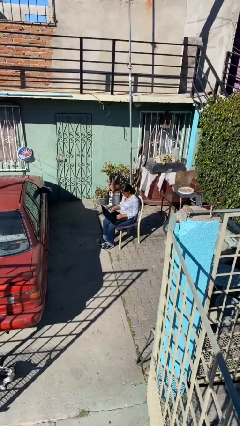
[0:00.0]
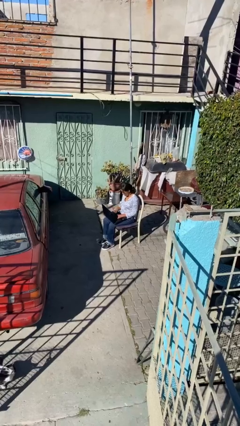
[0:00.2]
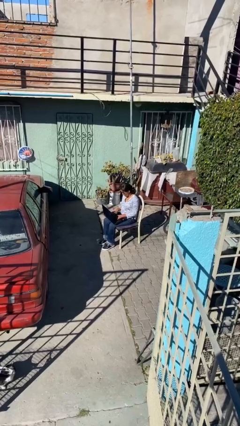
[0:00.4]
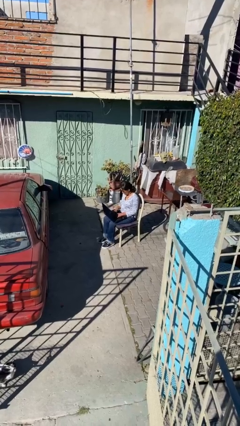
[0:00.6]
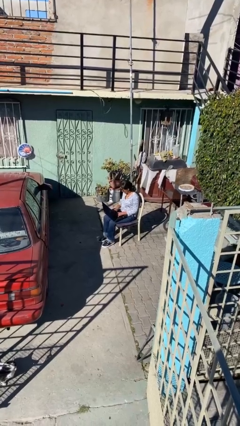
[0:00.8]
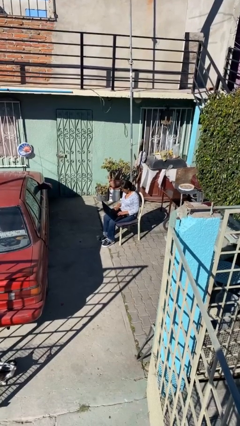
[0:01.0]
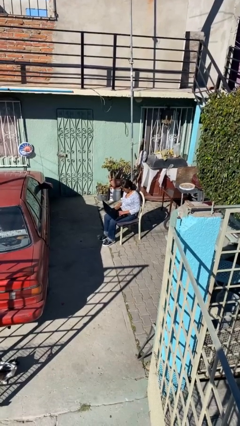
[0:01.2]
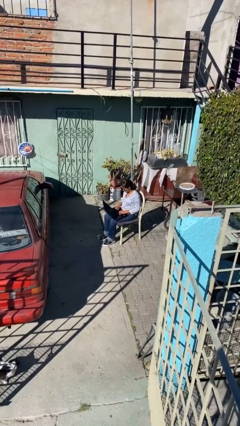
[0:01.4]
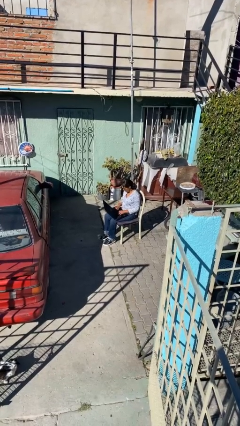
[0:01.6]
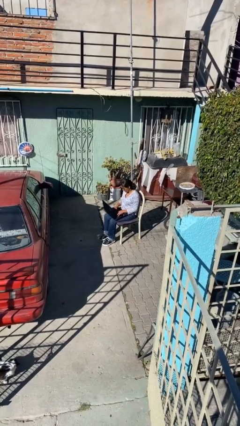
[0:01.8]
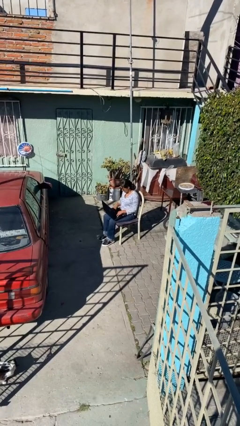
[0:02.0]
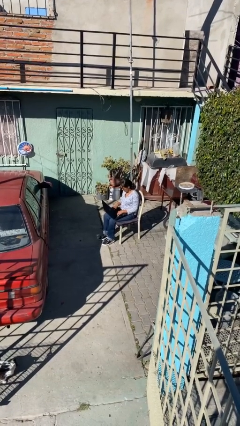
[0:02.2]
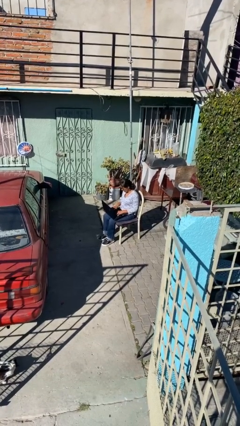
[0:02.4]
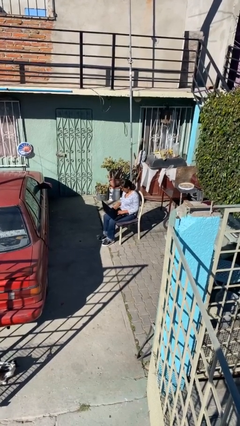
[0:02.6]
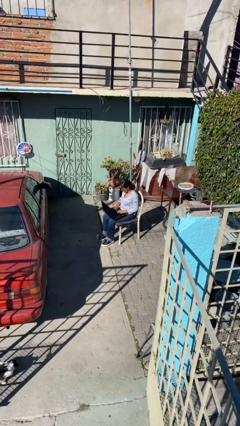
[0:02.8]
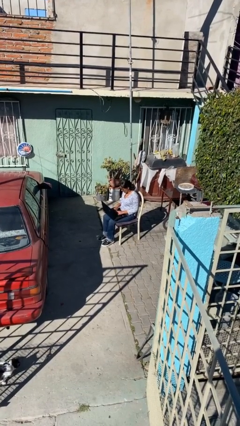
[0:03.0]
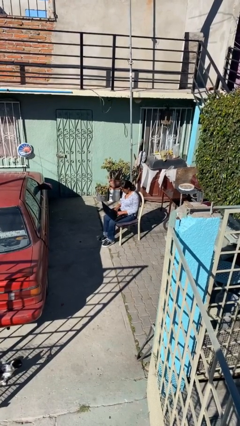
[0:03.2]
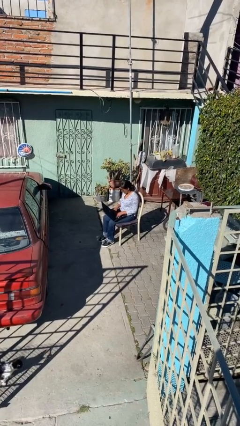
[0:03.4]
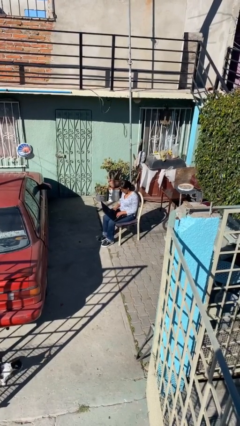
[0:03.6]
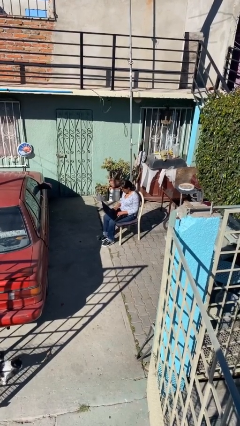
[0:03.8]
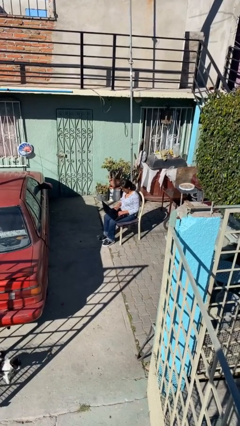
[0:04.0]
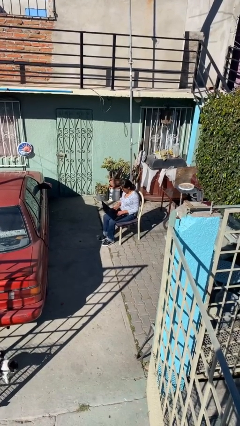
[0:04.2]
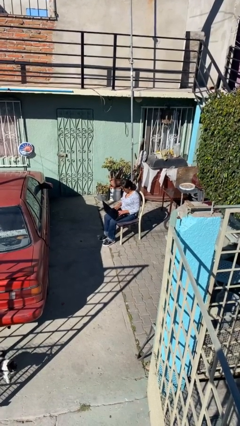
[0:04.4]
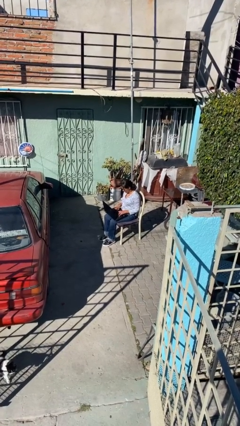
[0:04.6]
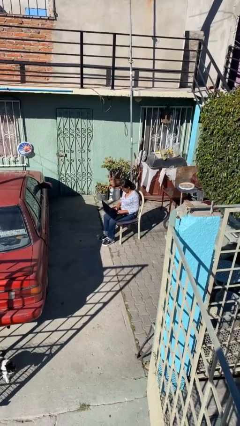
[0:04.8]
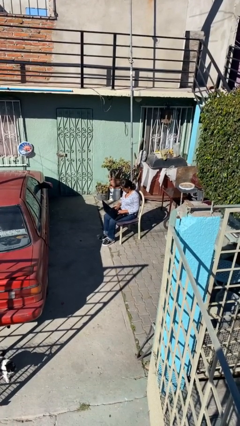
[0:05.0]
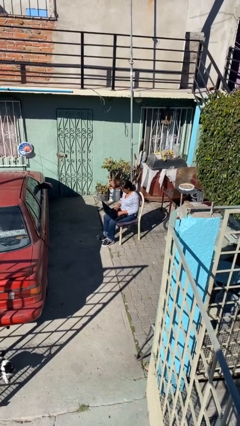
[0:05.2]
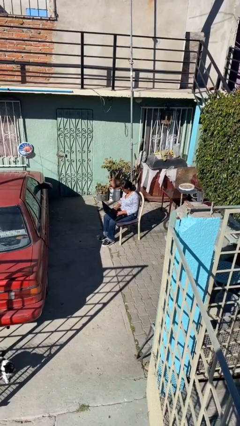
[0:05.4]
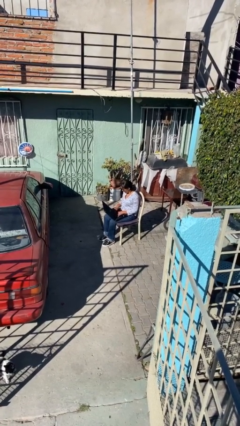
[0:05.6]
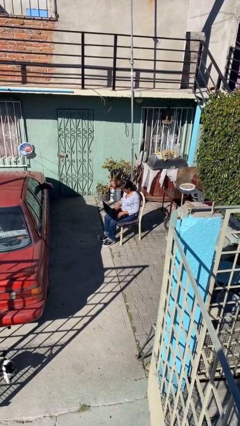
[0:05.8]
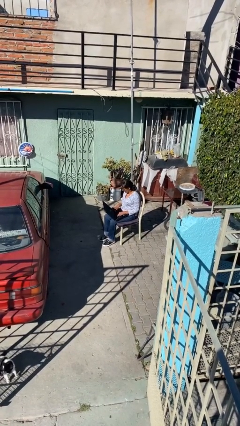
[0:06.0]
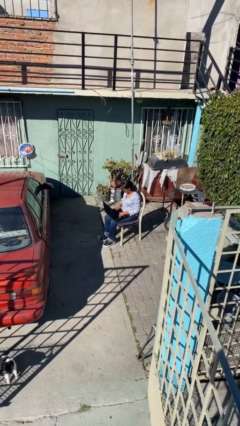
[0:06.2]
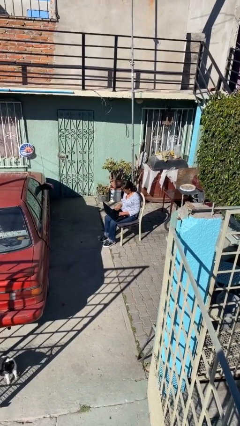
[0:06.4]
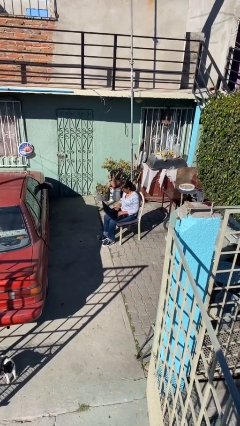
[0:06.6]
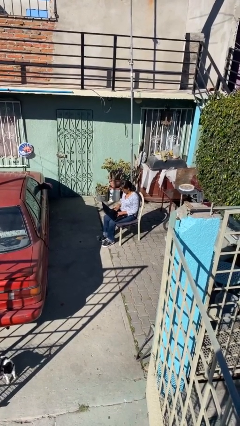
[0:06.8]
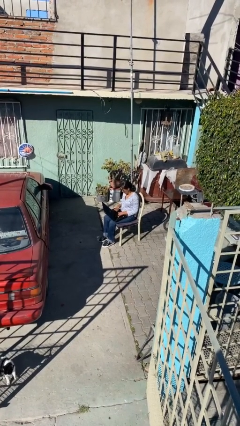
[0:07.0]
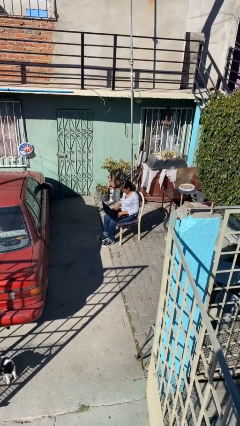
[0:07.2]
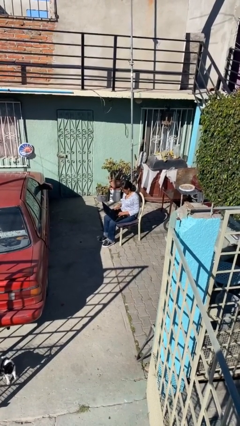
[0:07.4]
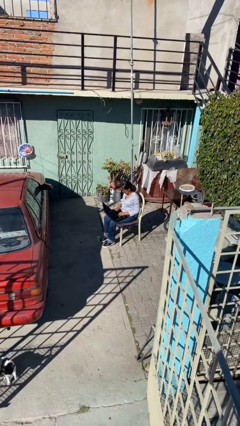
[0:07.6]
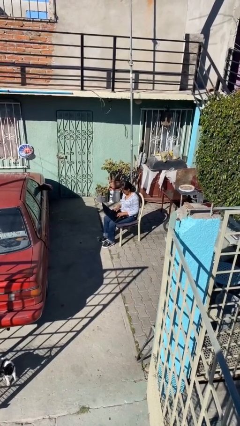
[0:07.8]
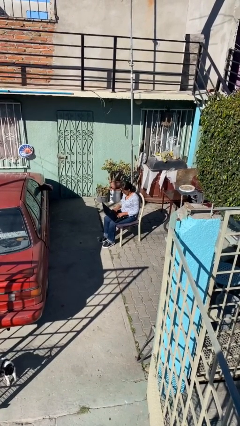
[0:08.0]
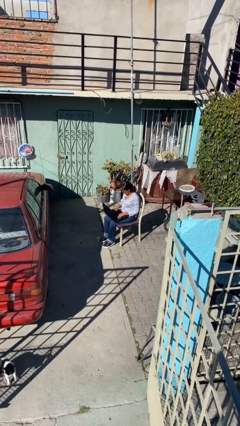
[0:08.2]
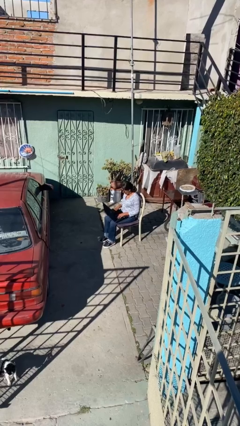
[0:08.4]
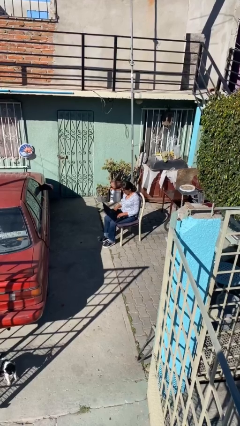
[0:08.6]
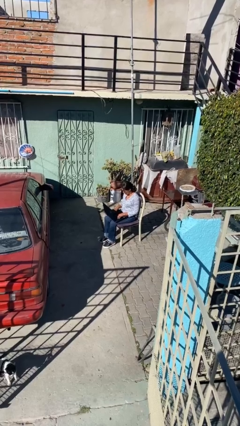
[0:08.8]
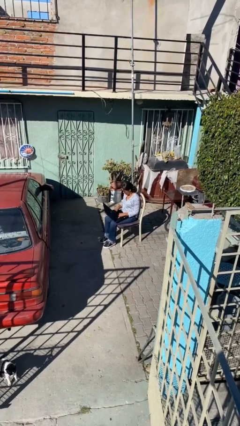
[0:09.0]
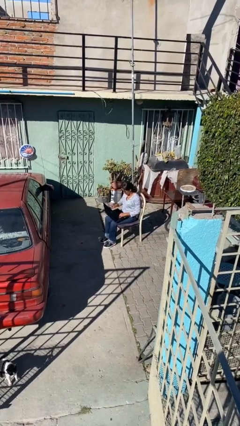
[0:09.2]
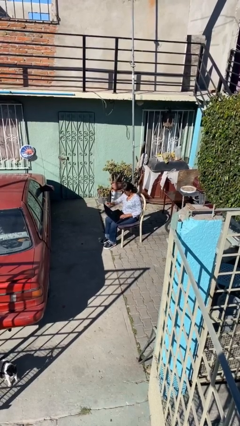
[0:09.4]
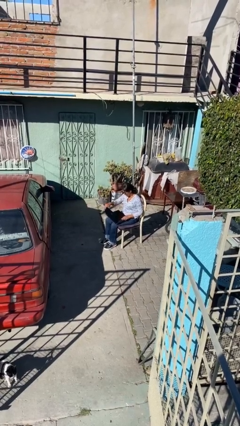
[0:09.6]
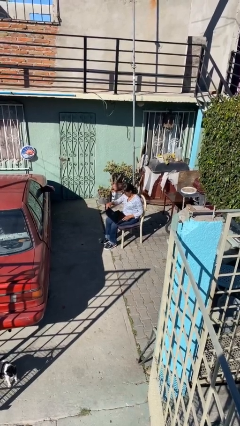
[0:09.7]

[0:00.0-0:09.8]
person interacts with laptop

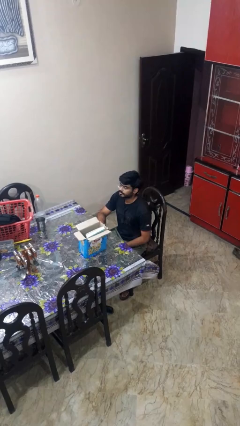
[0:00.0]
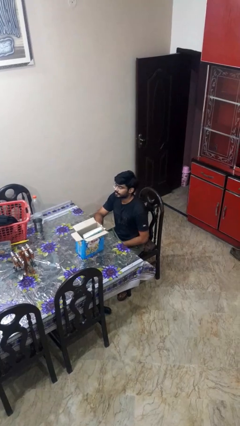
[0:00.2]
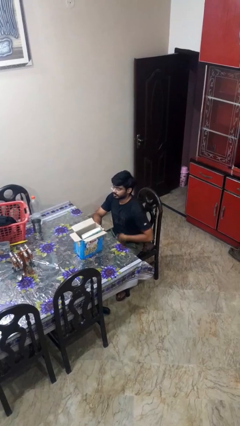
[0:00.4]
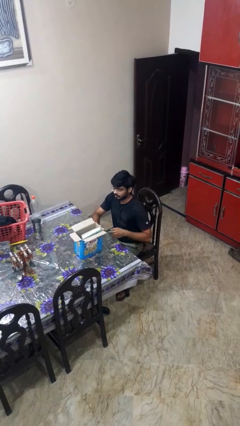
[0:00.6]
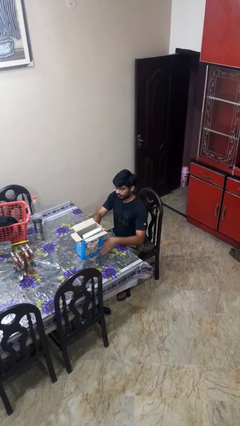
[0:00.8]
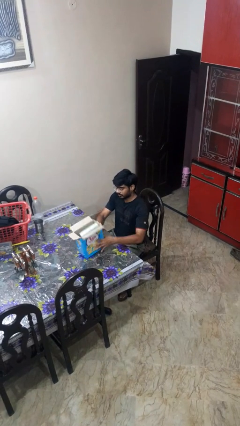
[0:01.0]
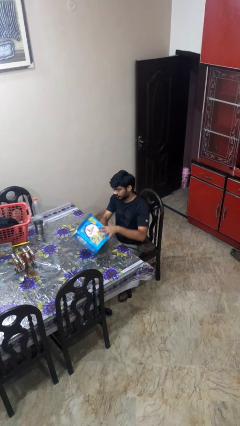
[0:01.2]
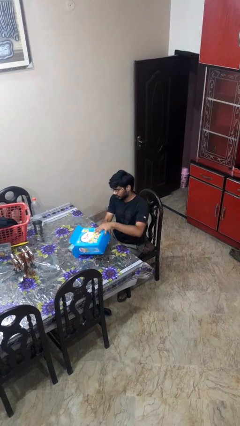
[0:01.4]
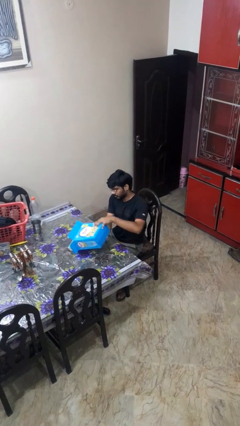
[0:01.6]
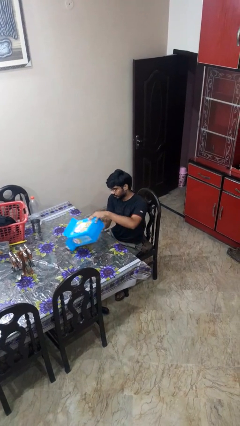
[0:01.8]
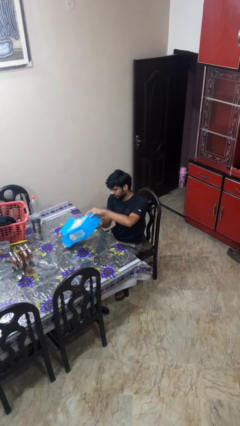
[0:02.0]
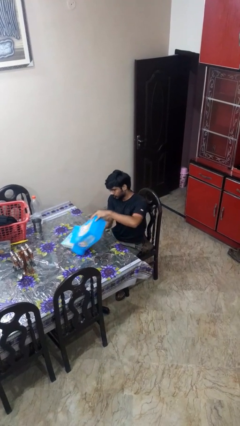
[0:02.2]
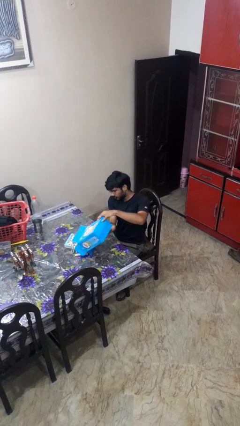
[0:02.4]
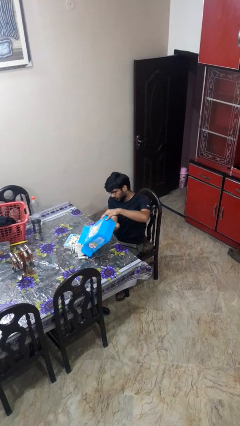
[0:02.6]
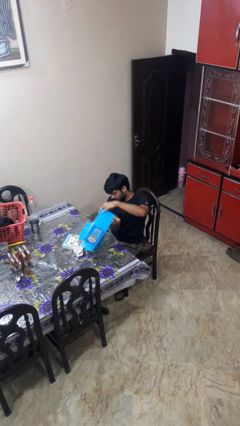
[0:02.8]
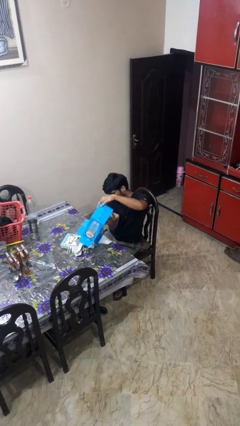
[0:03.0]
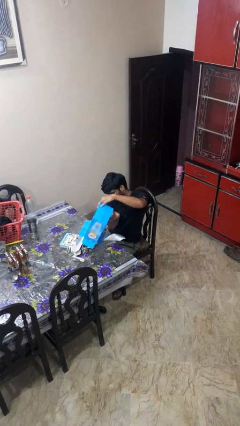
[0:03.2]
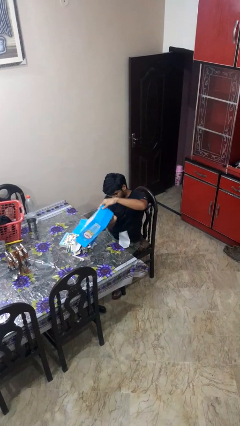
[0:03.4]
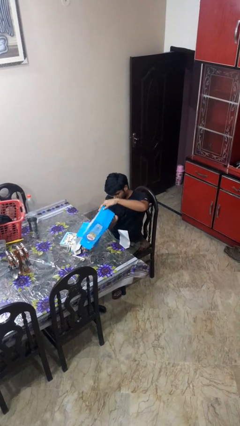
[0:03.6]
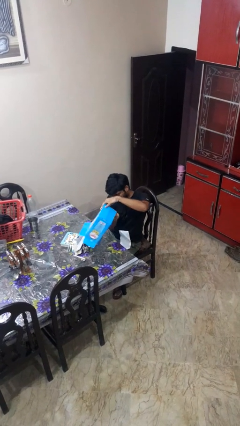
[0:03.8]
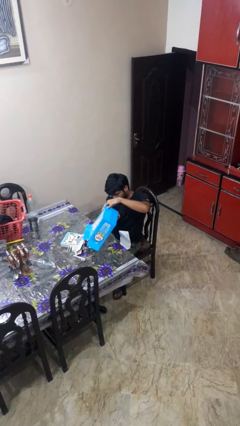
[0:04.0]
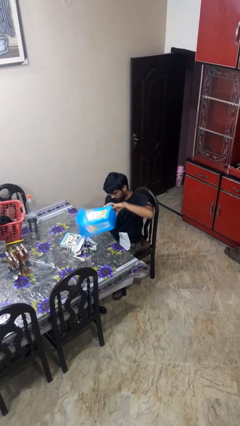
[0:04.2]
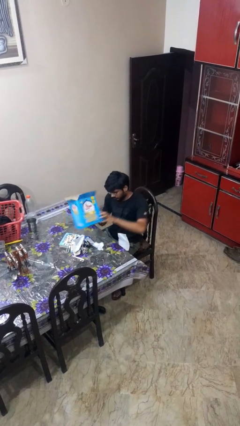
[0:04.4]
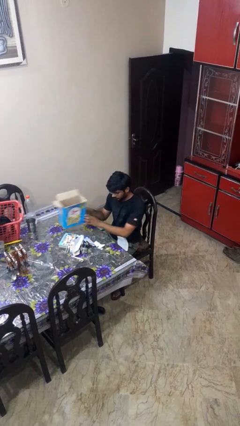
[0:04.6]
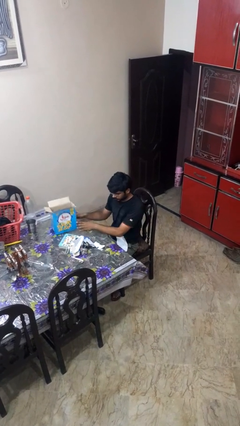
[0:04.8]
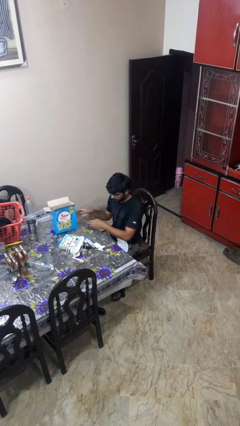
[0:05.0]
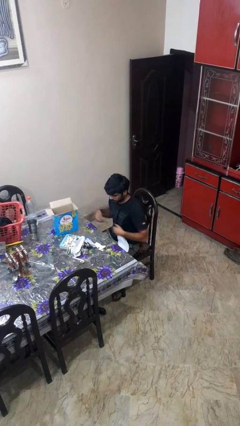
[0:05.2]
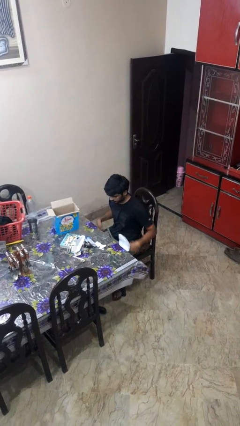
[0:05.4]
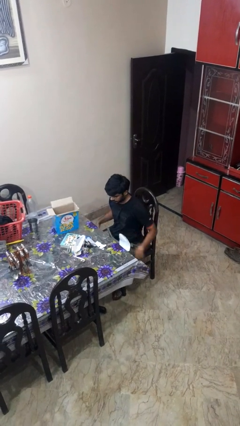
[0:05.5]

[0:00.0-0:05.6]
person unloads box onto table

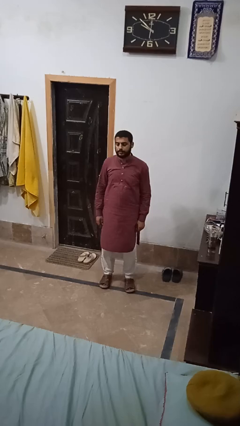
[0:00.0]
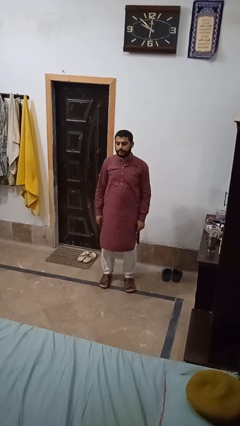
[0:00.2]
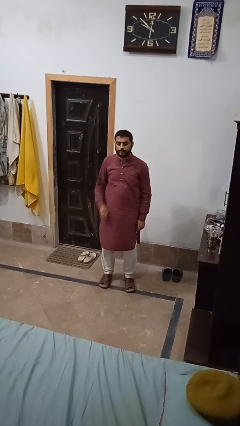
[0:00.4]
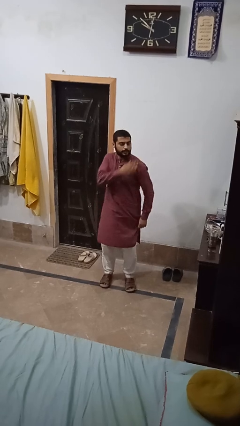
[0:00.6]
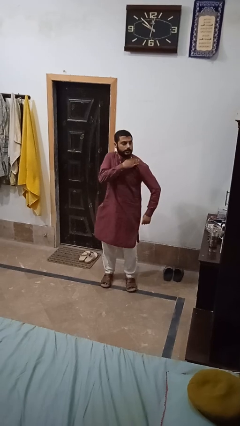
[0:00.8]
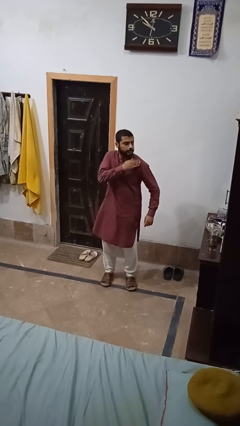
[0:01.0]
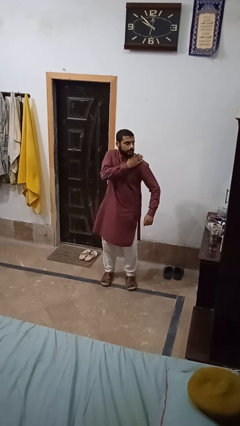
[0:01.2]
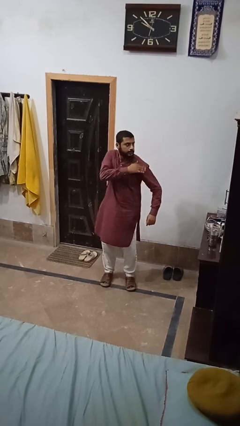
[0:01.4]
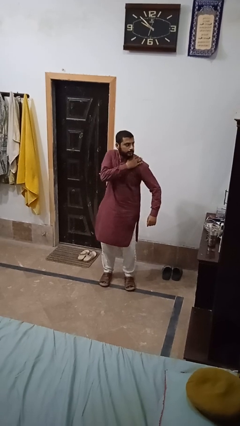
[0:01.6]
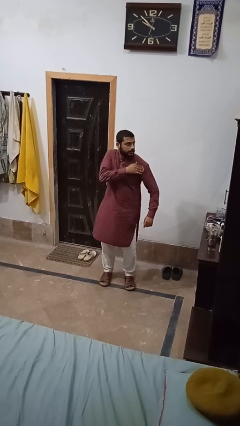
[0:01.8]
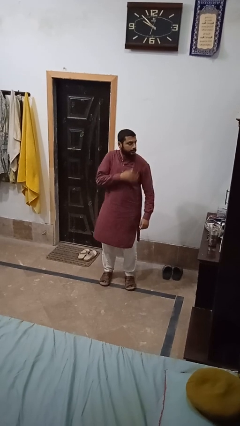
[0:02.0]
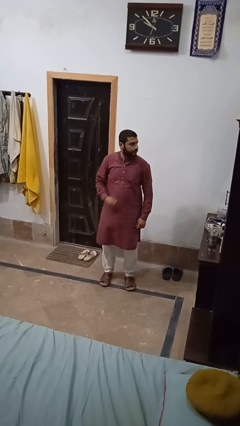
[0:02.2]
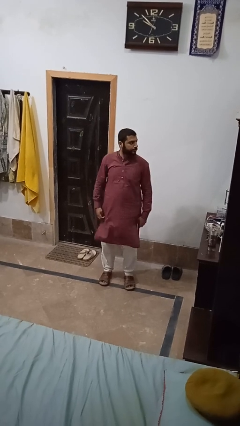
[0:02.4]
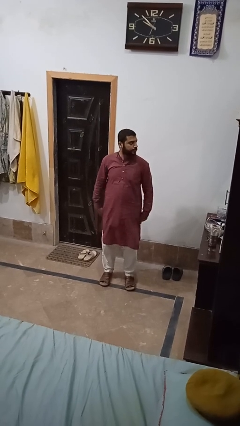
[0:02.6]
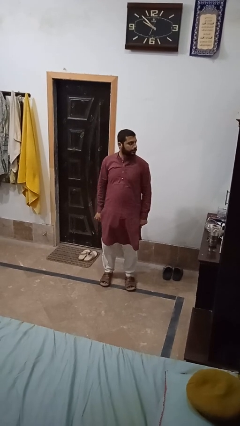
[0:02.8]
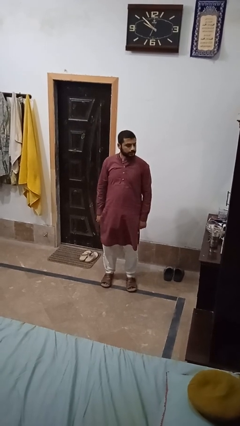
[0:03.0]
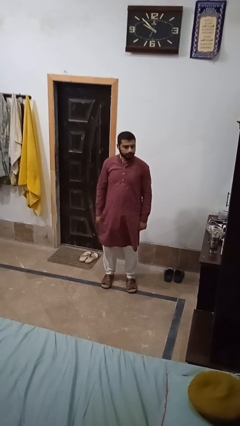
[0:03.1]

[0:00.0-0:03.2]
person swats bug
